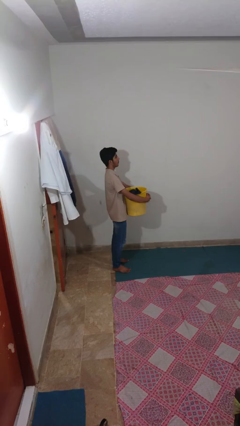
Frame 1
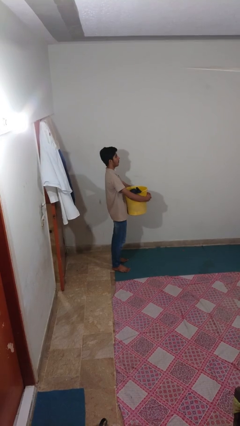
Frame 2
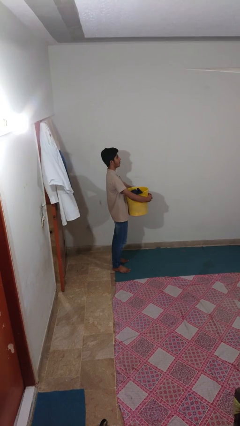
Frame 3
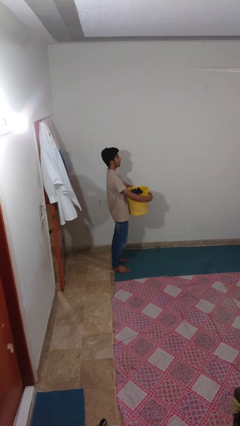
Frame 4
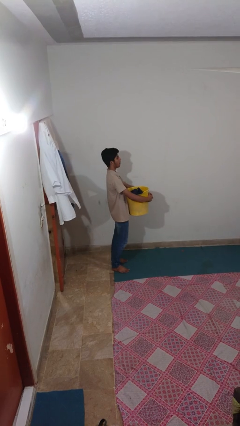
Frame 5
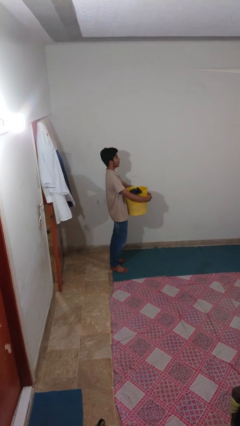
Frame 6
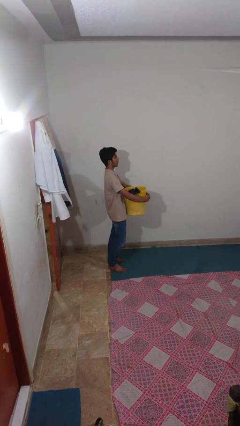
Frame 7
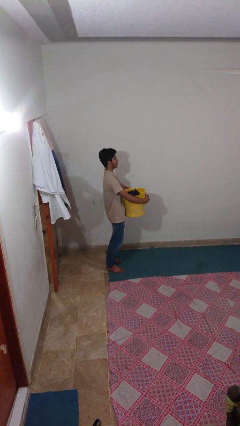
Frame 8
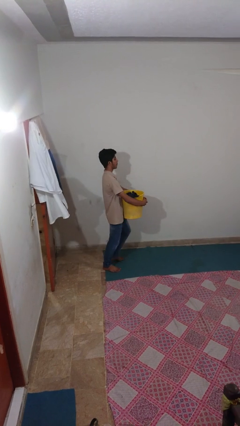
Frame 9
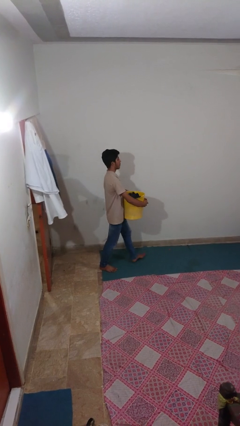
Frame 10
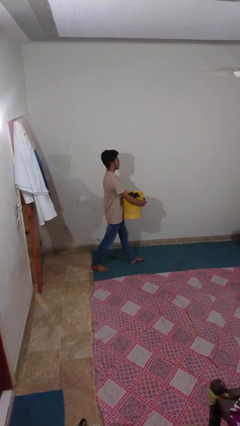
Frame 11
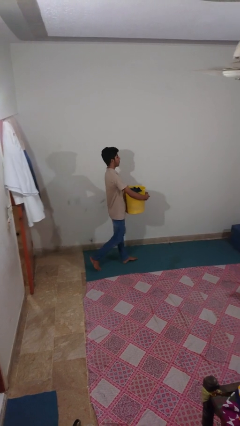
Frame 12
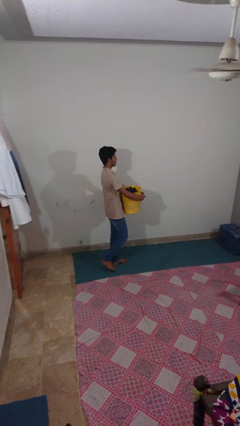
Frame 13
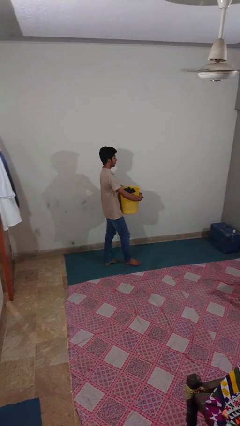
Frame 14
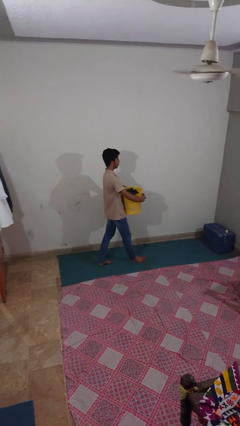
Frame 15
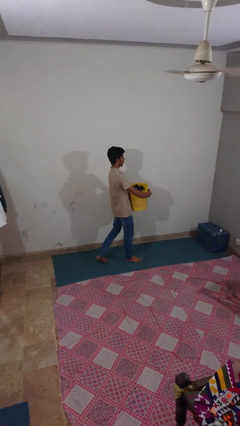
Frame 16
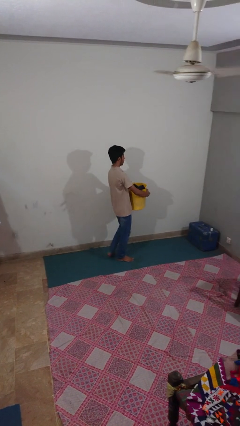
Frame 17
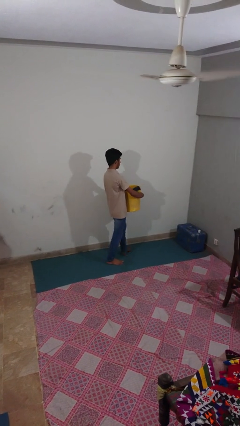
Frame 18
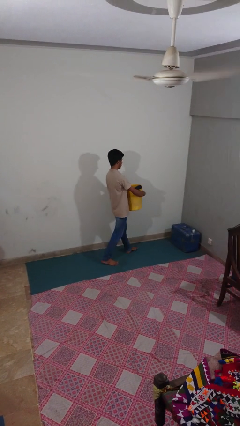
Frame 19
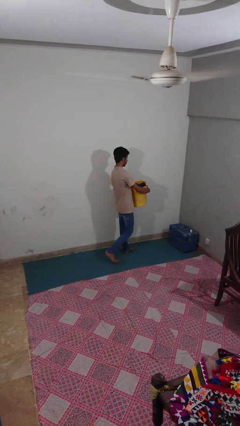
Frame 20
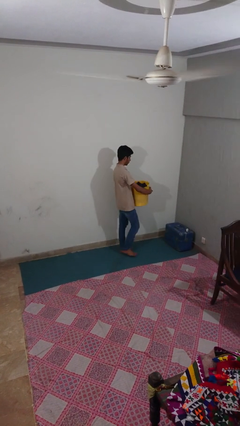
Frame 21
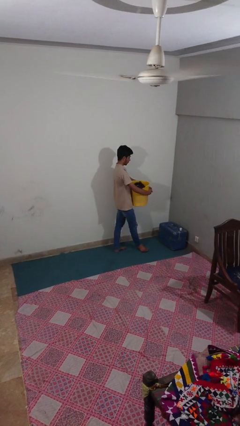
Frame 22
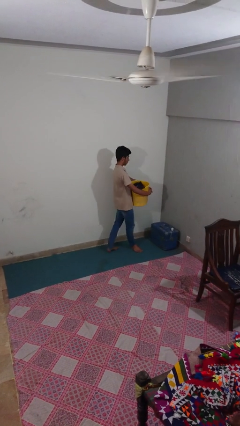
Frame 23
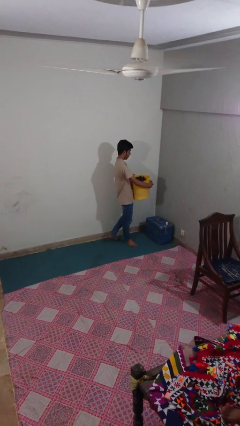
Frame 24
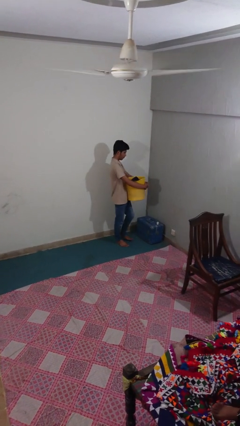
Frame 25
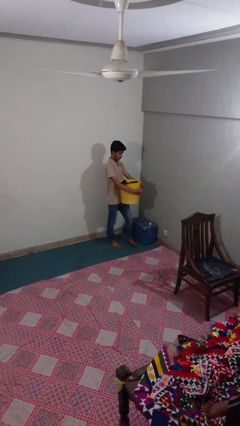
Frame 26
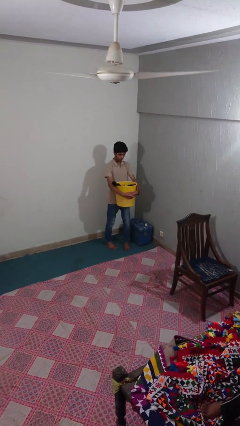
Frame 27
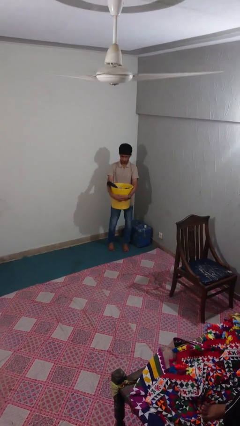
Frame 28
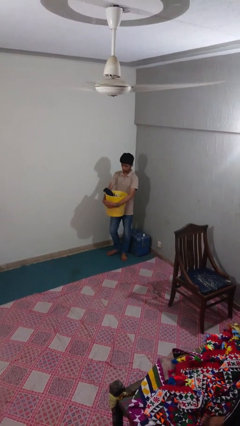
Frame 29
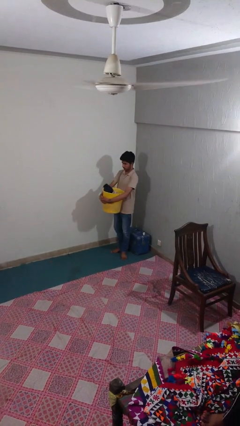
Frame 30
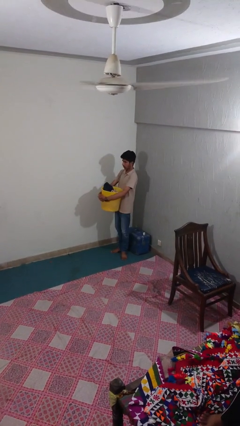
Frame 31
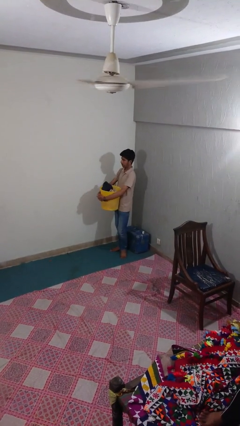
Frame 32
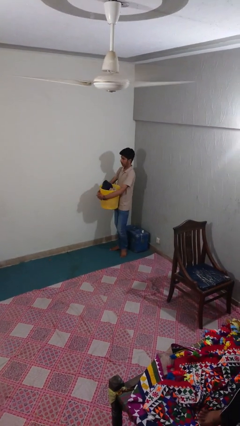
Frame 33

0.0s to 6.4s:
person carries laundry basket

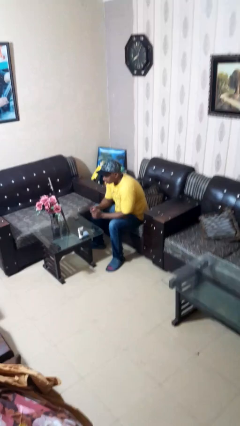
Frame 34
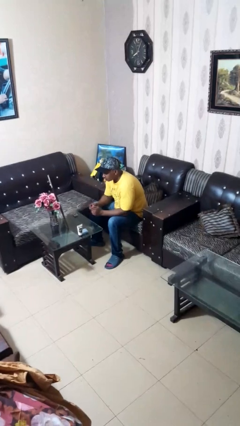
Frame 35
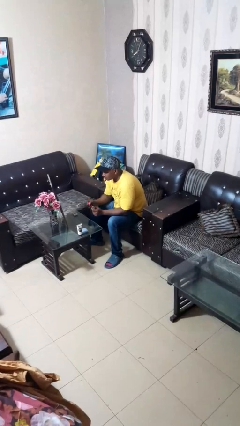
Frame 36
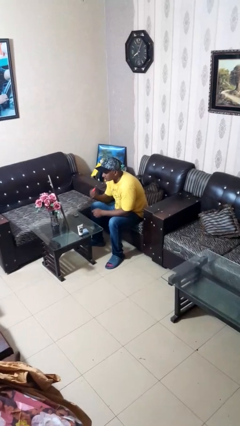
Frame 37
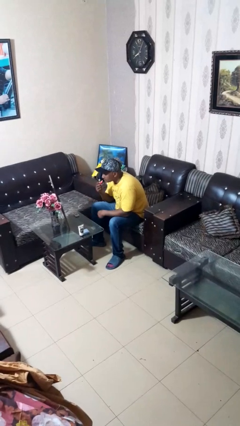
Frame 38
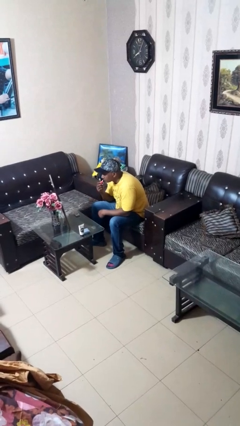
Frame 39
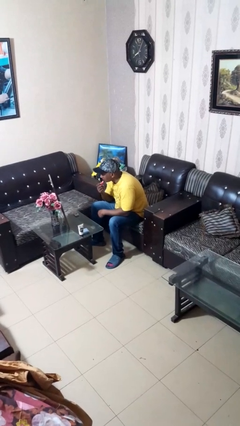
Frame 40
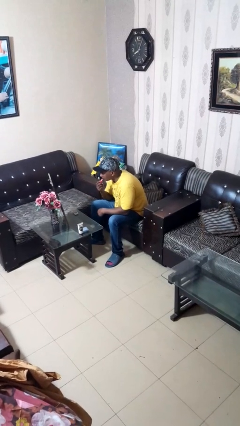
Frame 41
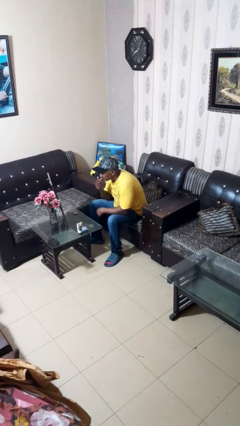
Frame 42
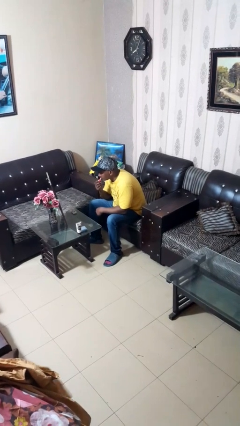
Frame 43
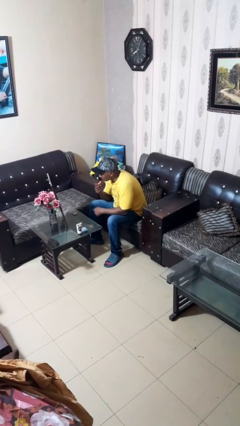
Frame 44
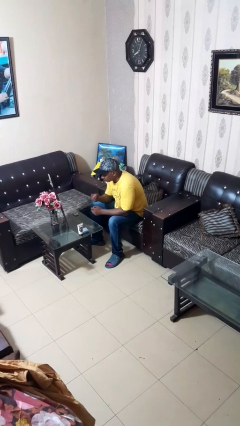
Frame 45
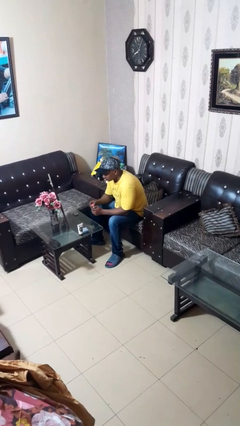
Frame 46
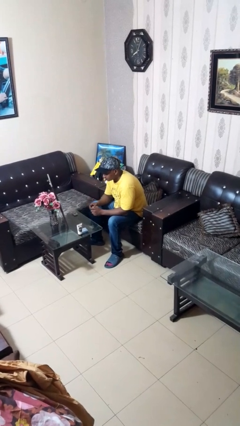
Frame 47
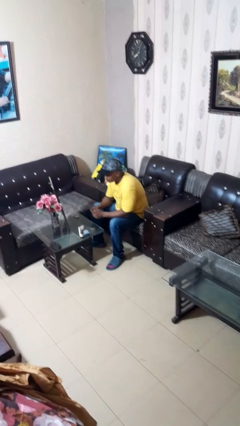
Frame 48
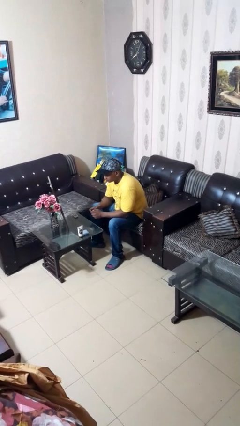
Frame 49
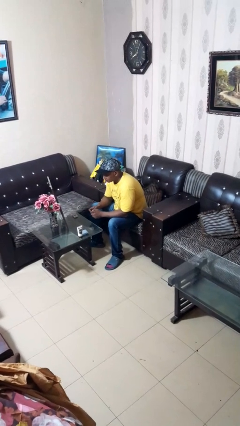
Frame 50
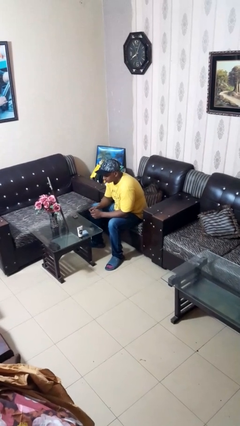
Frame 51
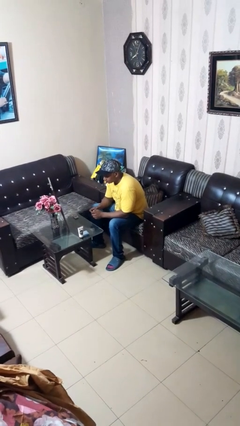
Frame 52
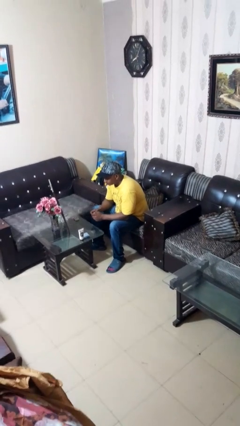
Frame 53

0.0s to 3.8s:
person applies lip makeup

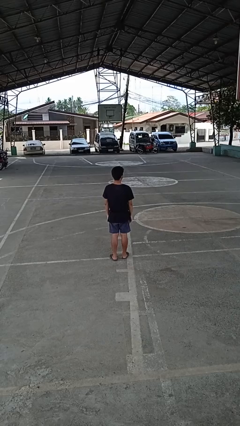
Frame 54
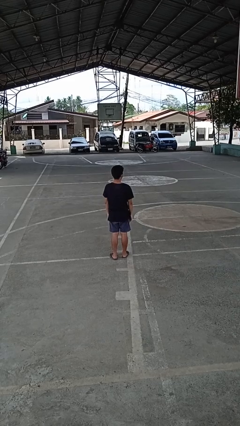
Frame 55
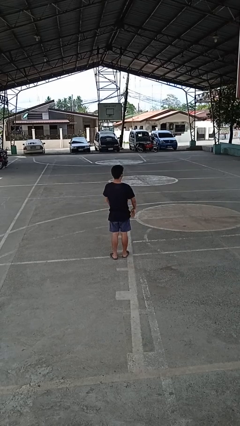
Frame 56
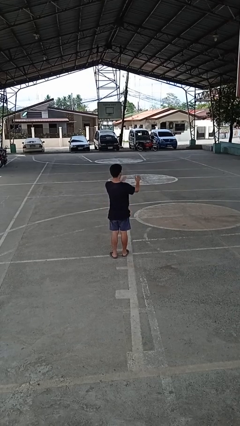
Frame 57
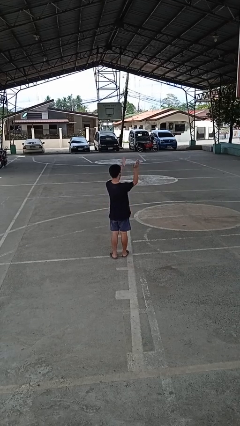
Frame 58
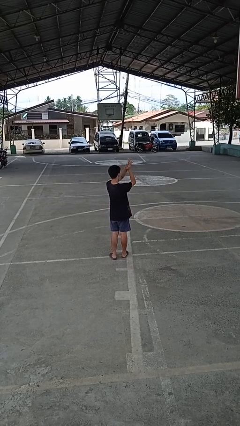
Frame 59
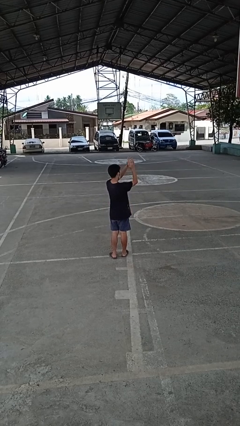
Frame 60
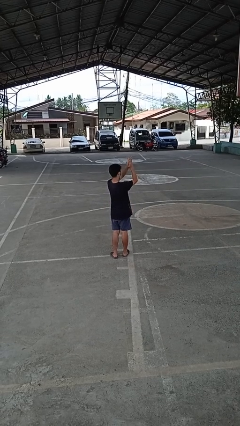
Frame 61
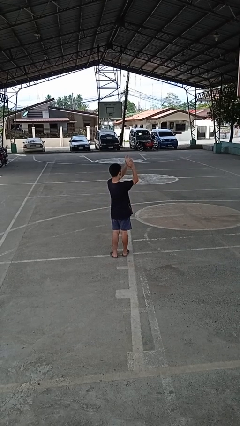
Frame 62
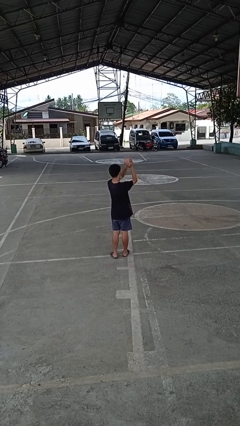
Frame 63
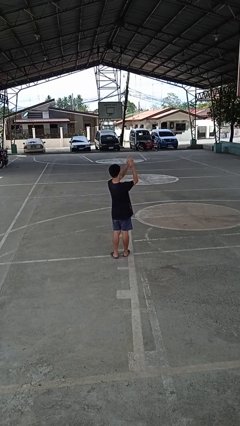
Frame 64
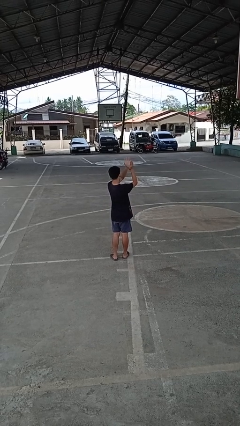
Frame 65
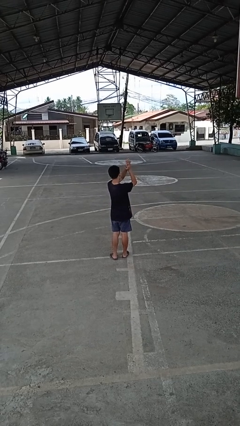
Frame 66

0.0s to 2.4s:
person claps hands

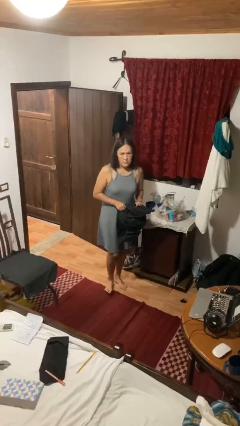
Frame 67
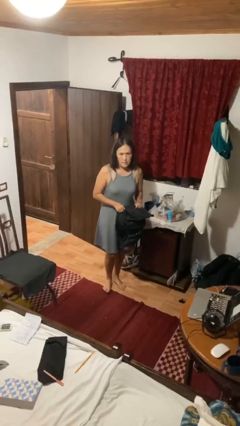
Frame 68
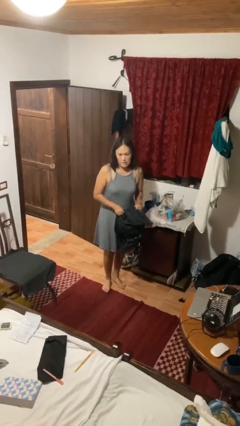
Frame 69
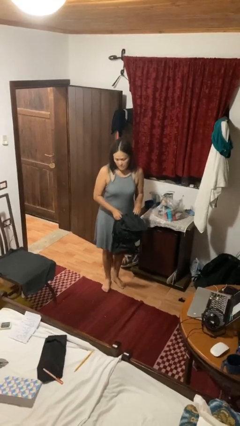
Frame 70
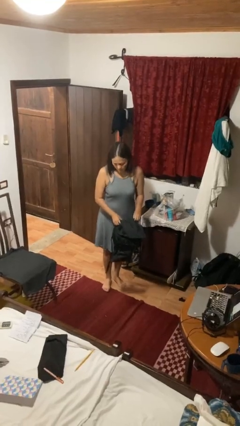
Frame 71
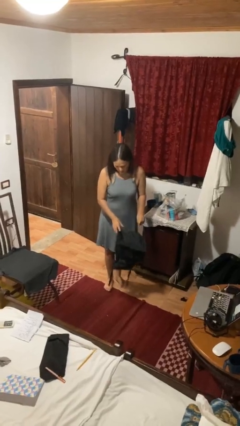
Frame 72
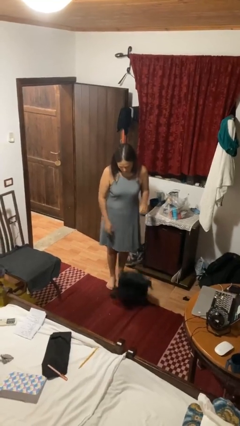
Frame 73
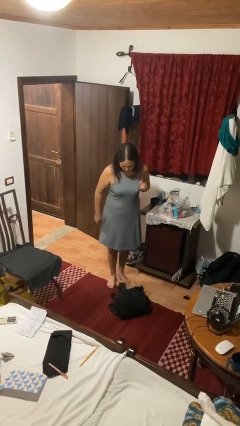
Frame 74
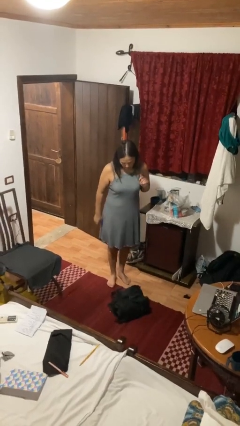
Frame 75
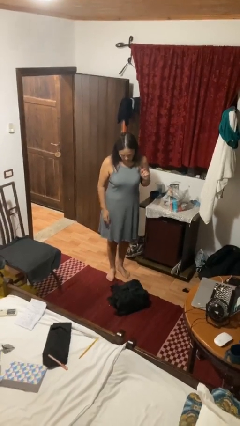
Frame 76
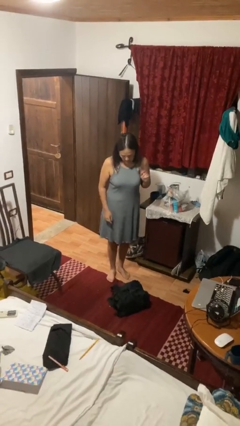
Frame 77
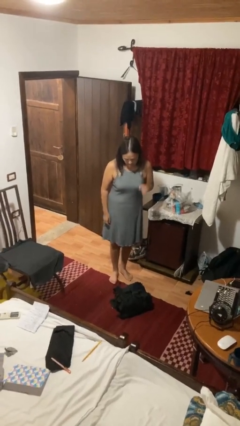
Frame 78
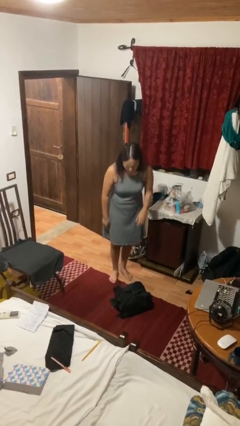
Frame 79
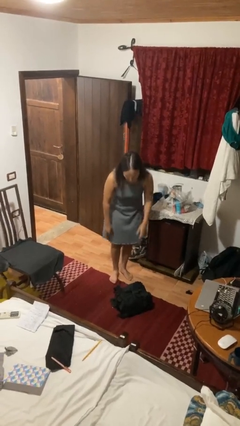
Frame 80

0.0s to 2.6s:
person drops object

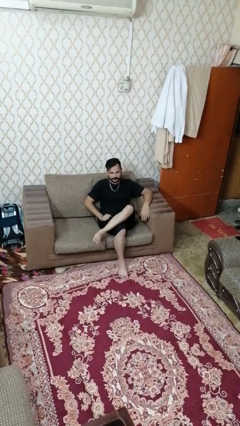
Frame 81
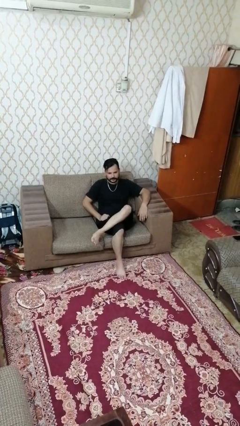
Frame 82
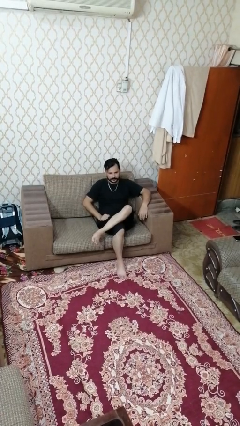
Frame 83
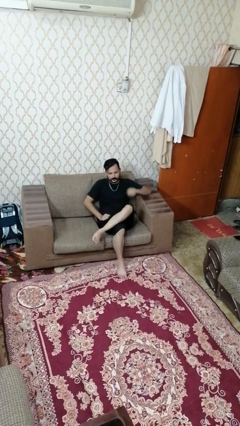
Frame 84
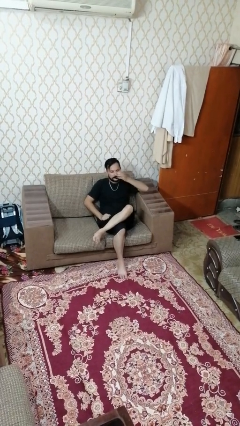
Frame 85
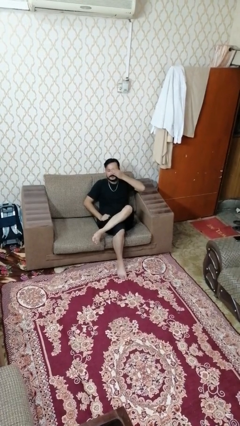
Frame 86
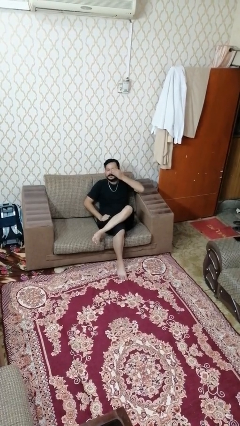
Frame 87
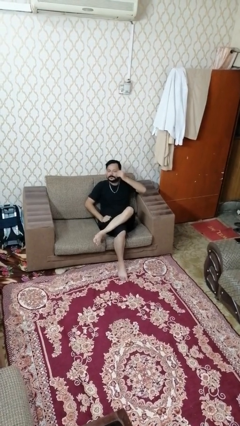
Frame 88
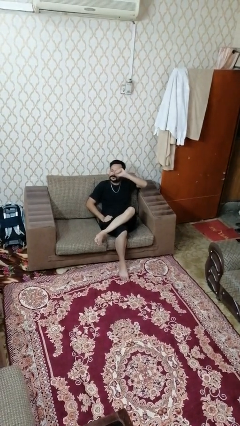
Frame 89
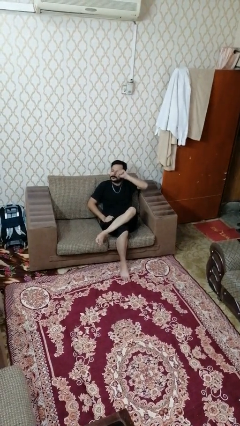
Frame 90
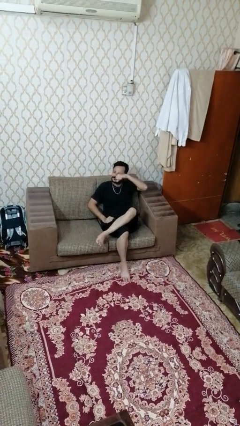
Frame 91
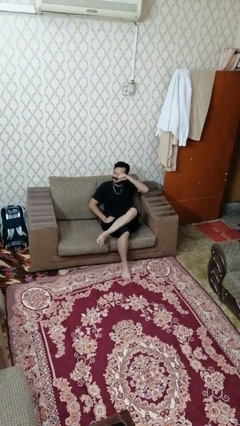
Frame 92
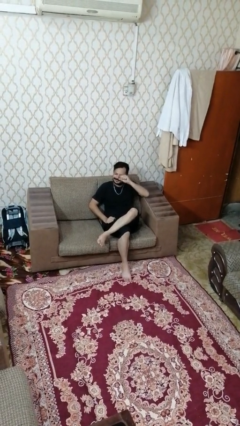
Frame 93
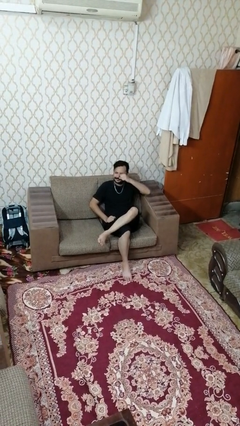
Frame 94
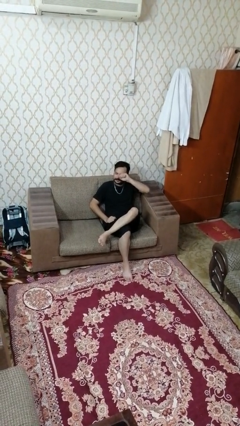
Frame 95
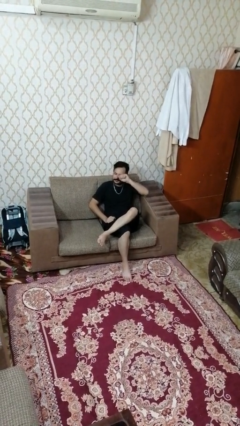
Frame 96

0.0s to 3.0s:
person rubs eyes
